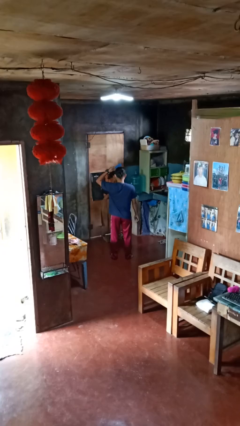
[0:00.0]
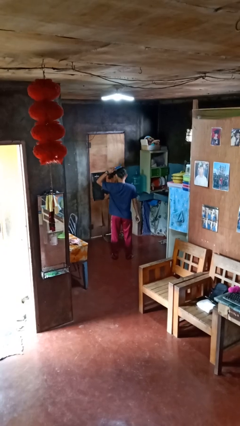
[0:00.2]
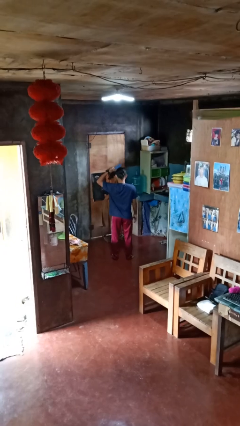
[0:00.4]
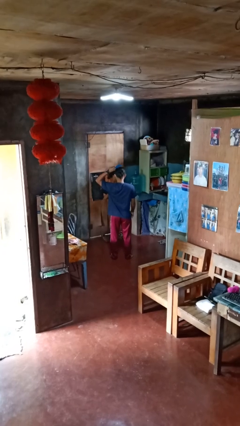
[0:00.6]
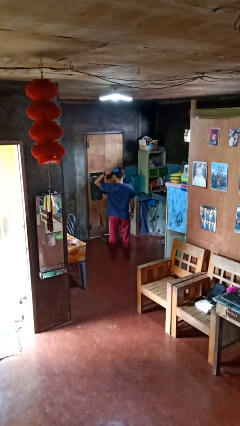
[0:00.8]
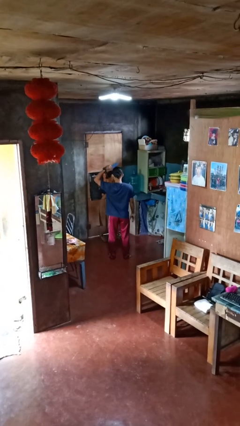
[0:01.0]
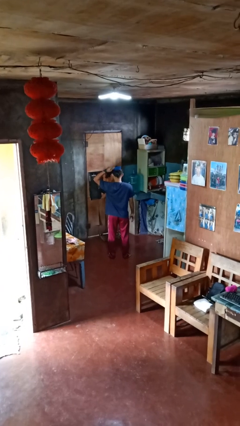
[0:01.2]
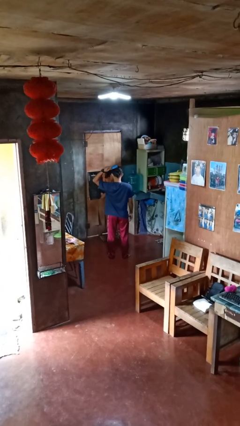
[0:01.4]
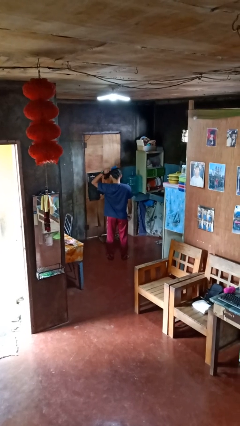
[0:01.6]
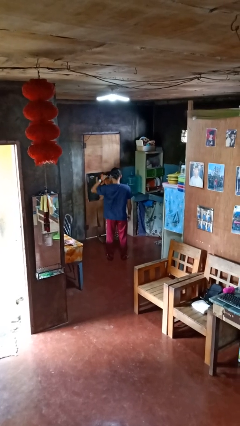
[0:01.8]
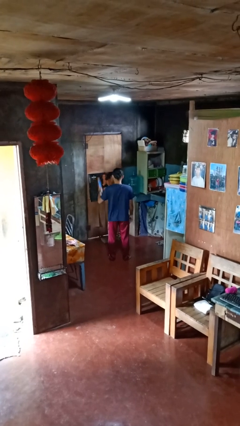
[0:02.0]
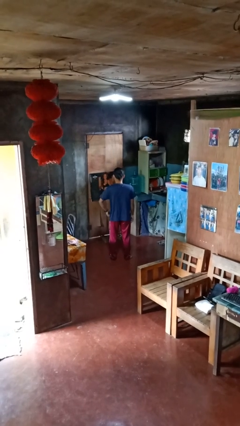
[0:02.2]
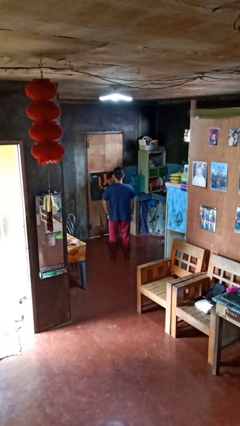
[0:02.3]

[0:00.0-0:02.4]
person brushes hair

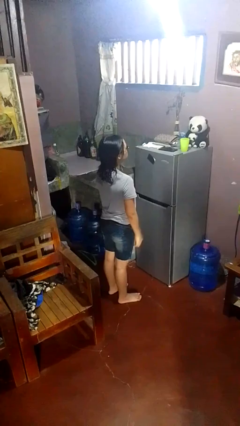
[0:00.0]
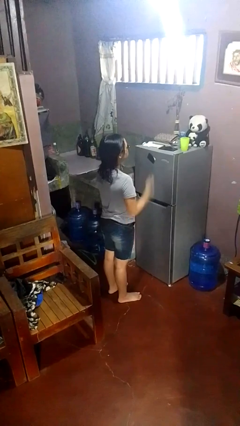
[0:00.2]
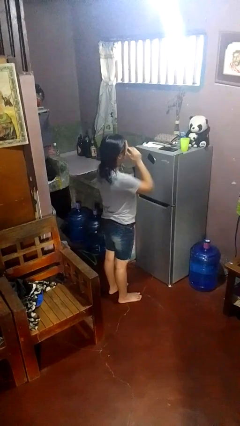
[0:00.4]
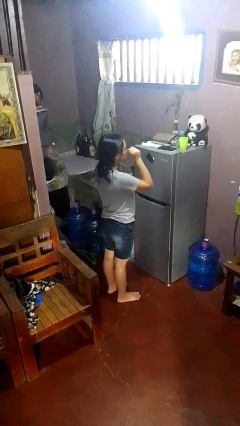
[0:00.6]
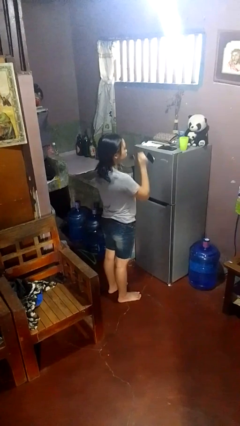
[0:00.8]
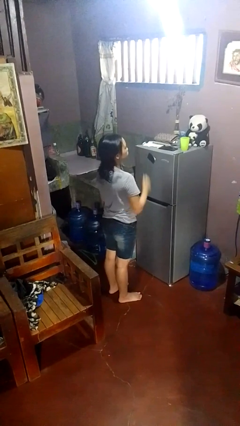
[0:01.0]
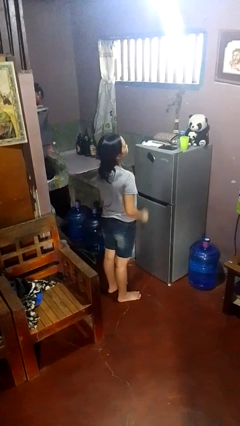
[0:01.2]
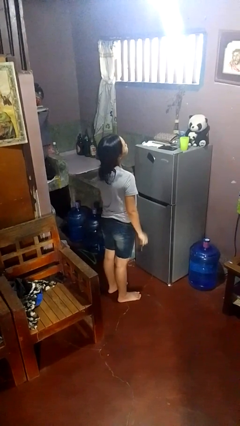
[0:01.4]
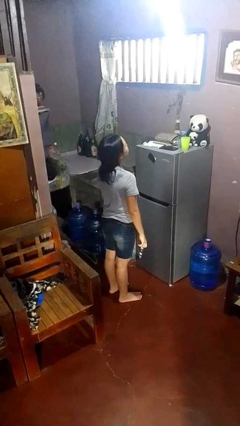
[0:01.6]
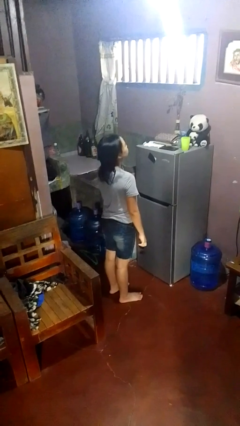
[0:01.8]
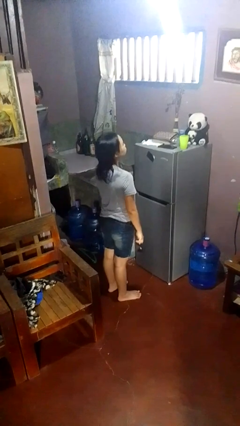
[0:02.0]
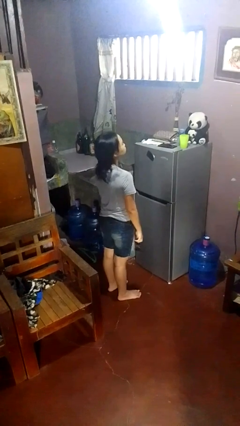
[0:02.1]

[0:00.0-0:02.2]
person takes off sunglasses

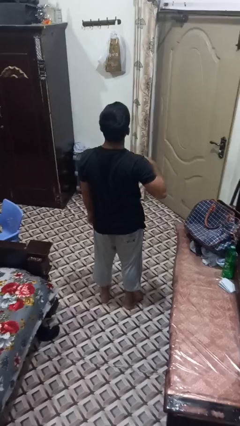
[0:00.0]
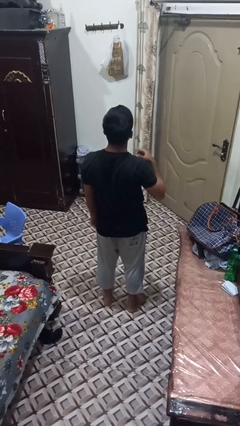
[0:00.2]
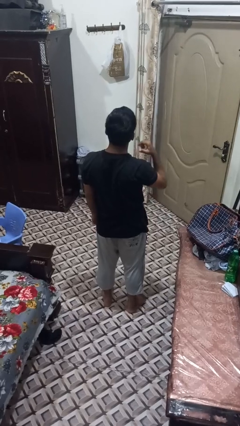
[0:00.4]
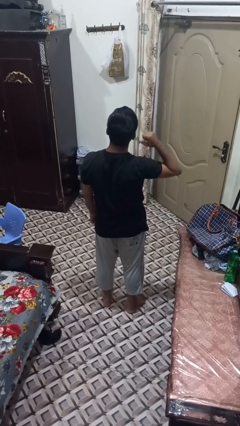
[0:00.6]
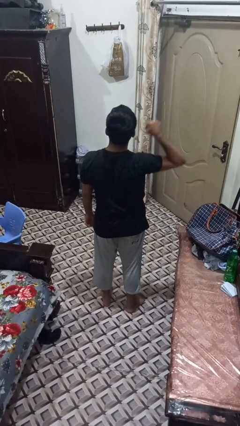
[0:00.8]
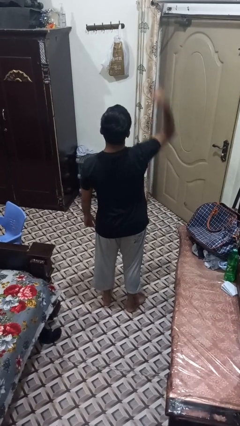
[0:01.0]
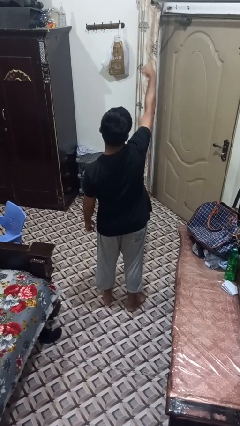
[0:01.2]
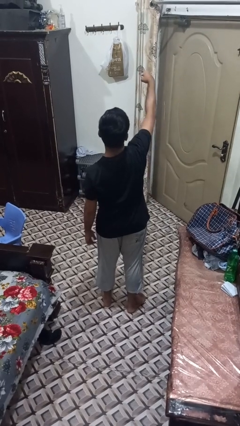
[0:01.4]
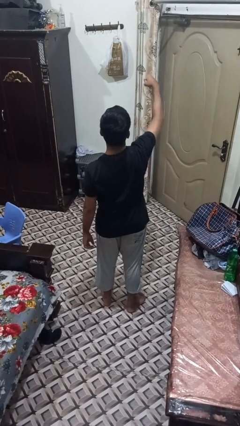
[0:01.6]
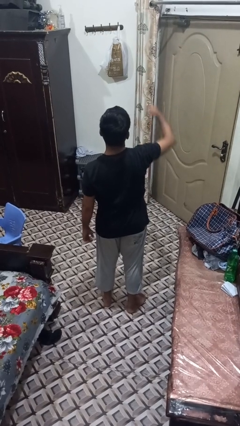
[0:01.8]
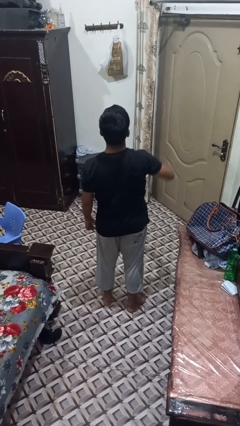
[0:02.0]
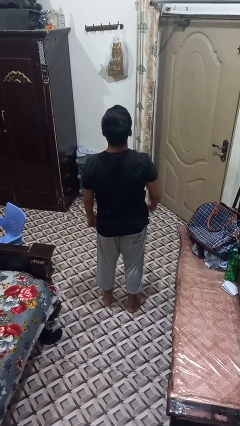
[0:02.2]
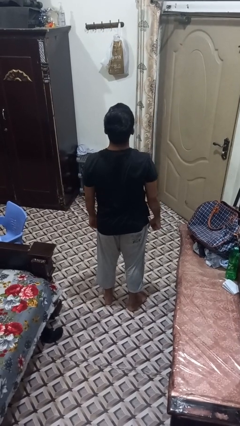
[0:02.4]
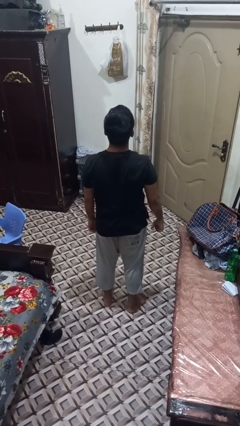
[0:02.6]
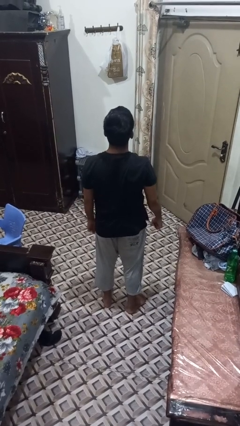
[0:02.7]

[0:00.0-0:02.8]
person punches

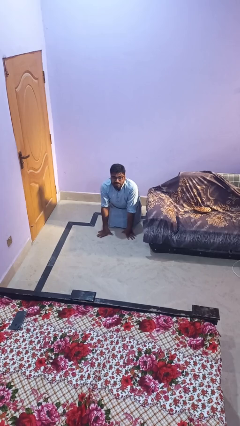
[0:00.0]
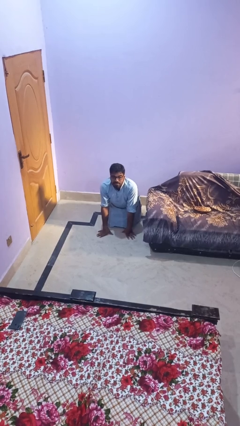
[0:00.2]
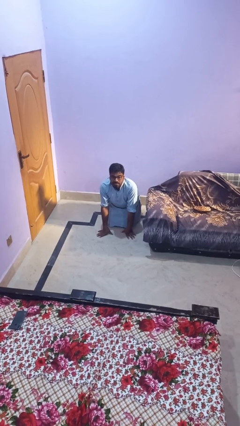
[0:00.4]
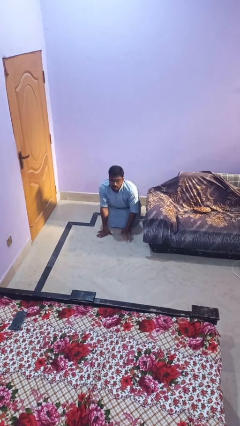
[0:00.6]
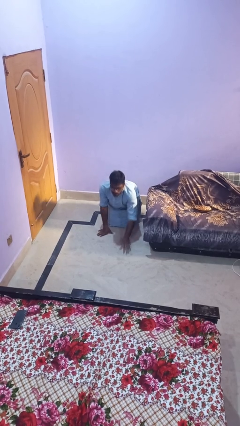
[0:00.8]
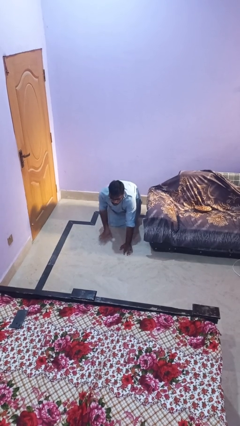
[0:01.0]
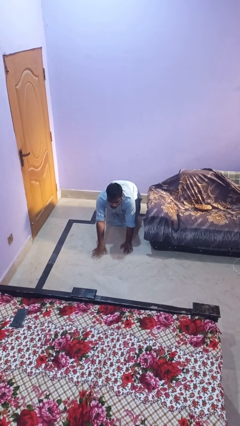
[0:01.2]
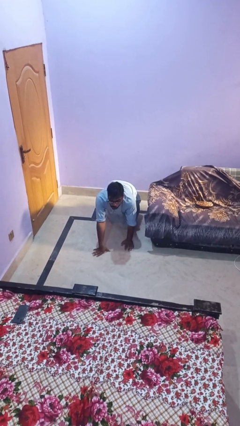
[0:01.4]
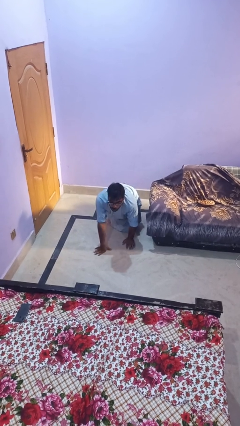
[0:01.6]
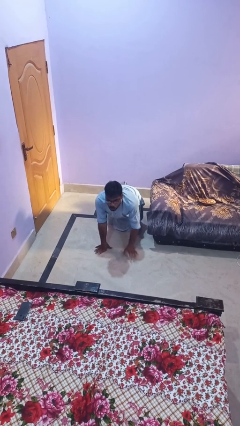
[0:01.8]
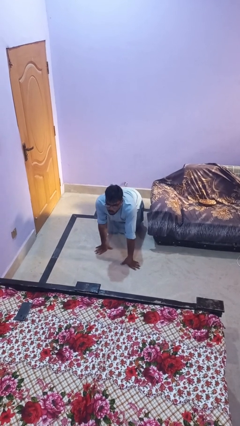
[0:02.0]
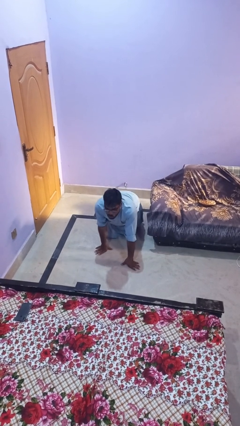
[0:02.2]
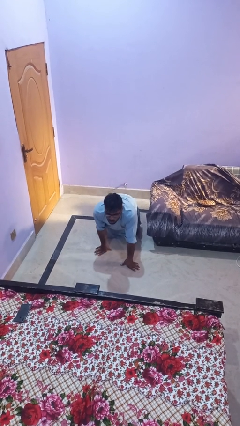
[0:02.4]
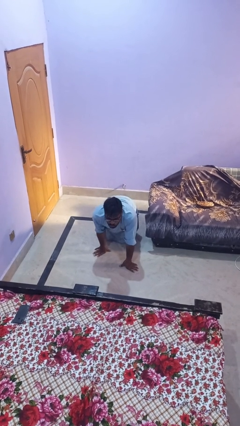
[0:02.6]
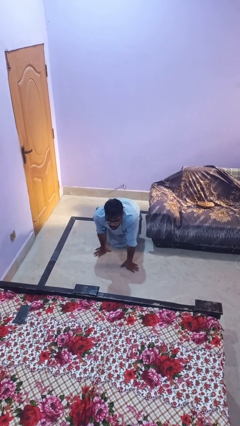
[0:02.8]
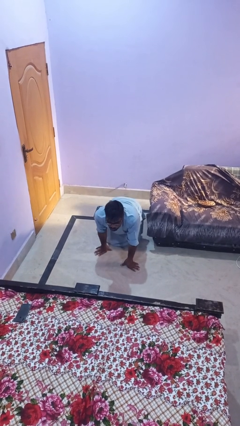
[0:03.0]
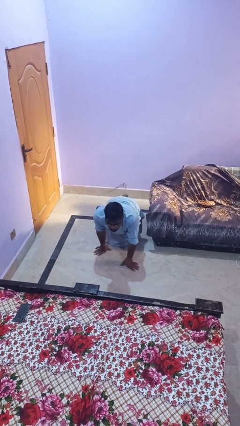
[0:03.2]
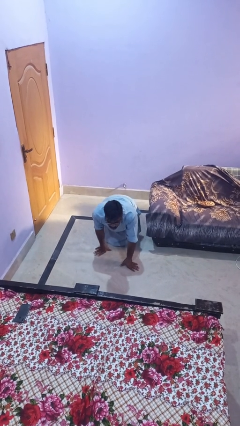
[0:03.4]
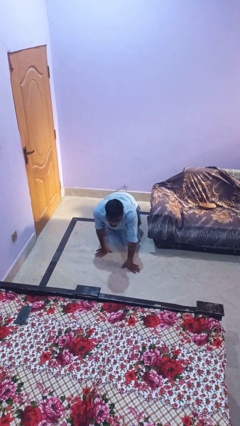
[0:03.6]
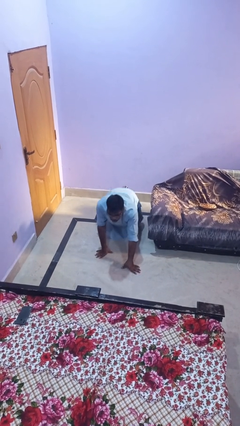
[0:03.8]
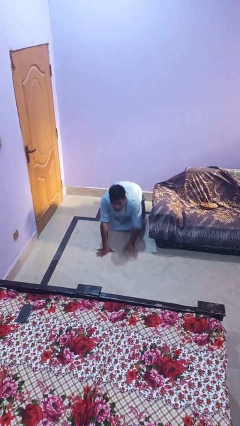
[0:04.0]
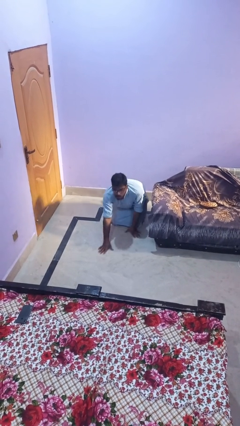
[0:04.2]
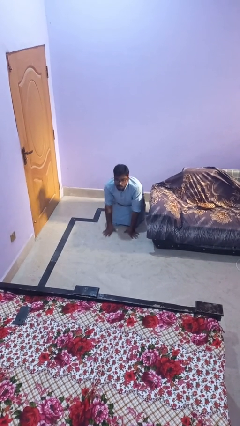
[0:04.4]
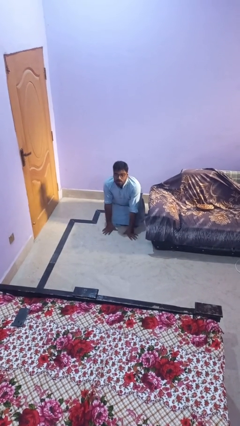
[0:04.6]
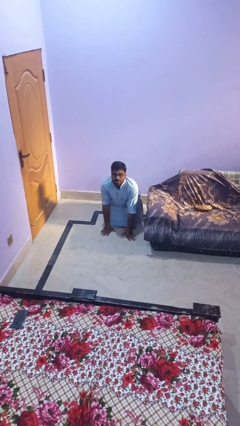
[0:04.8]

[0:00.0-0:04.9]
person crawls

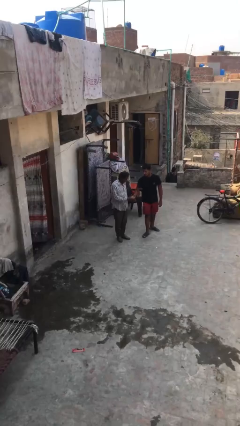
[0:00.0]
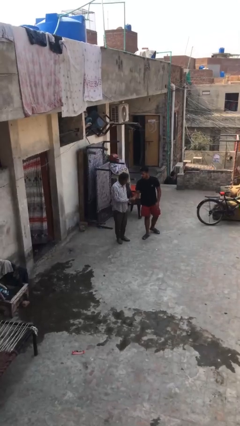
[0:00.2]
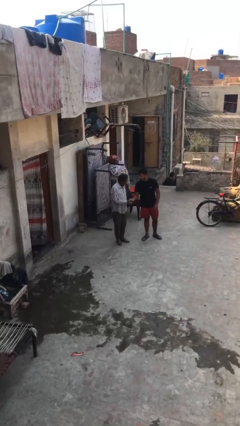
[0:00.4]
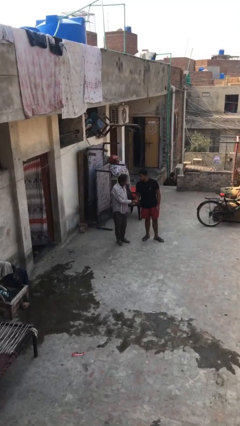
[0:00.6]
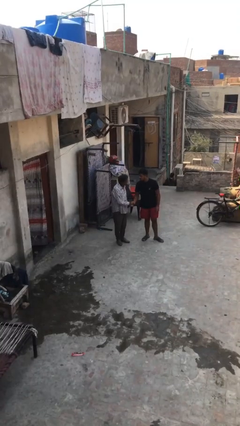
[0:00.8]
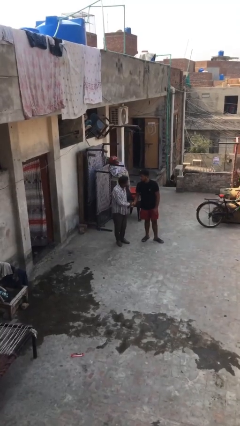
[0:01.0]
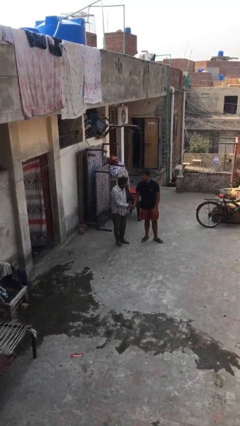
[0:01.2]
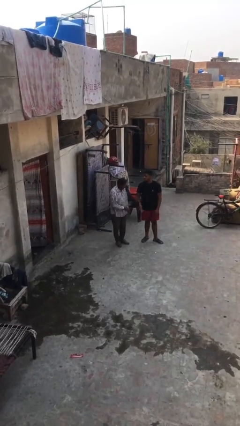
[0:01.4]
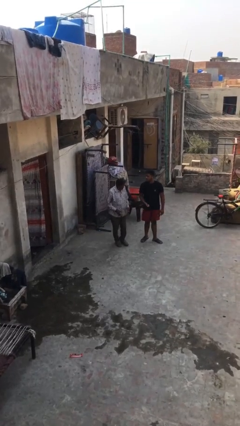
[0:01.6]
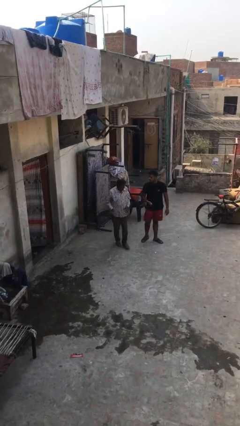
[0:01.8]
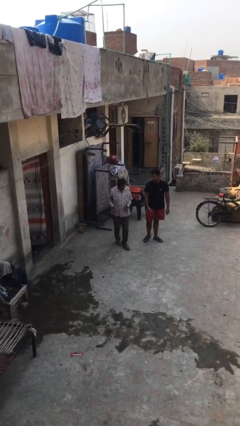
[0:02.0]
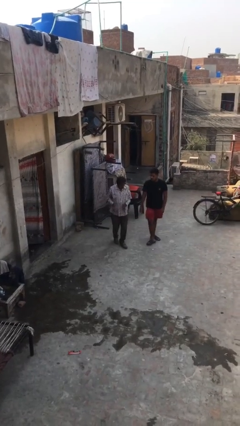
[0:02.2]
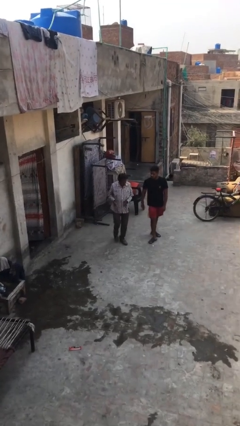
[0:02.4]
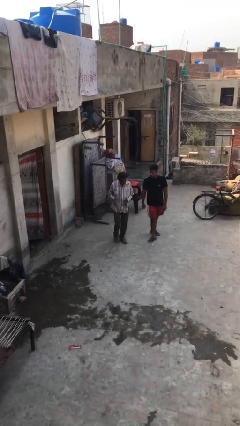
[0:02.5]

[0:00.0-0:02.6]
person shakes hand

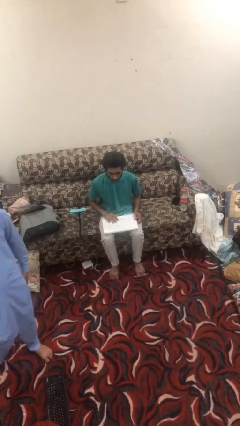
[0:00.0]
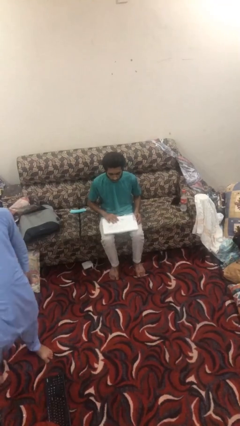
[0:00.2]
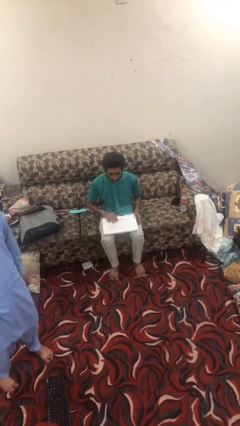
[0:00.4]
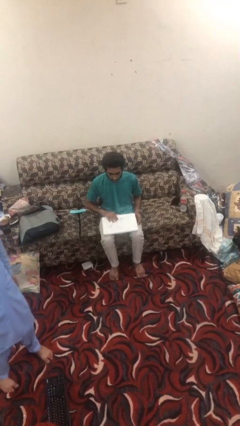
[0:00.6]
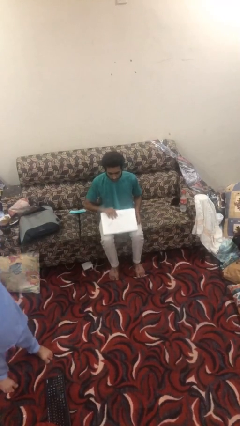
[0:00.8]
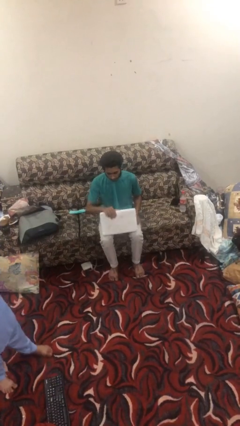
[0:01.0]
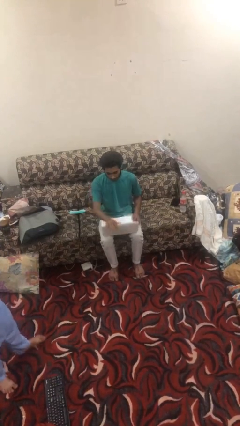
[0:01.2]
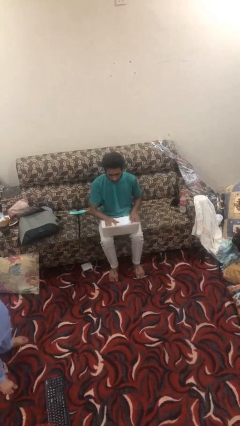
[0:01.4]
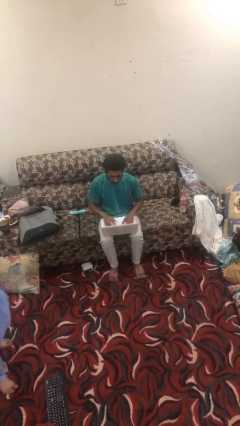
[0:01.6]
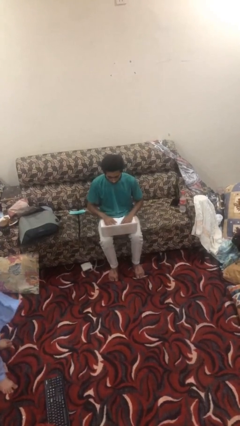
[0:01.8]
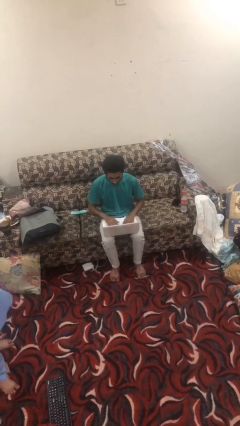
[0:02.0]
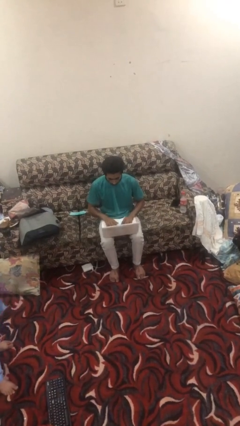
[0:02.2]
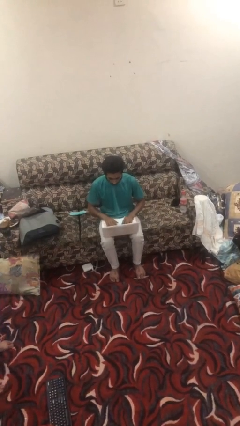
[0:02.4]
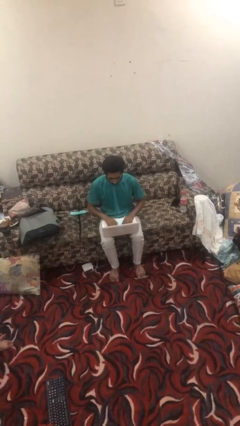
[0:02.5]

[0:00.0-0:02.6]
person opens laptop
